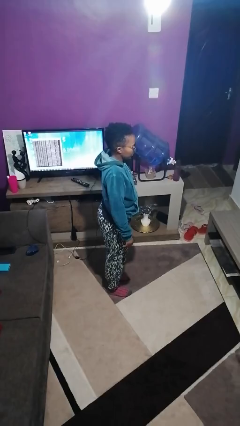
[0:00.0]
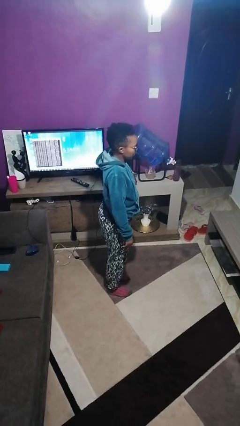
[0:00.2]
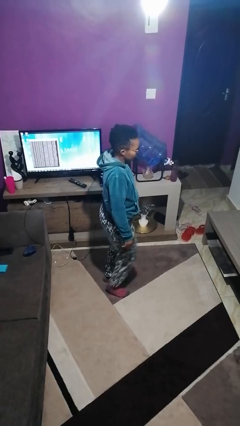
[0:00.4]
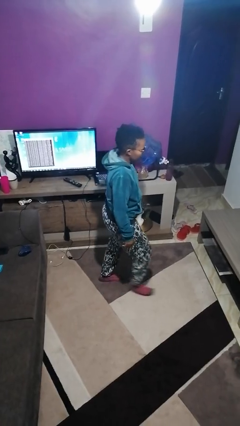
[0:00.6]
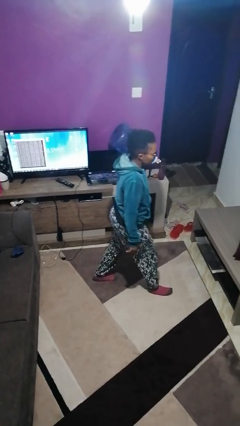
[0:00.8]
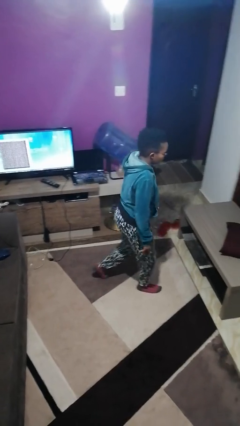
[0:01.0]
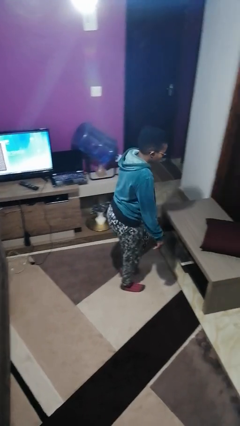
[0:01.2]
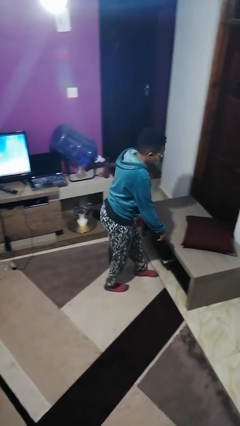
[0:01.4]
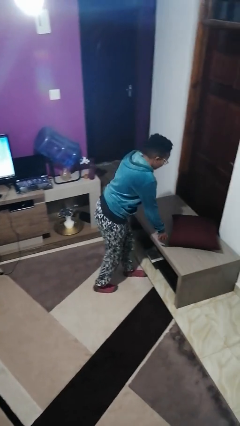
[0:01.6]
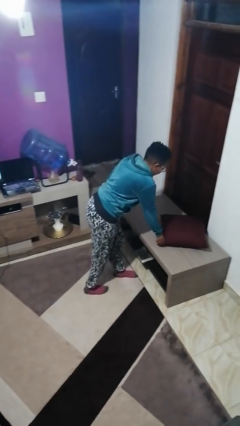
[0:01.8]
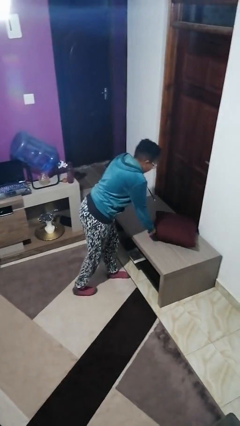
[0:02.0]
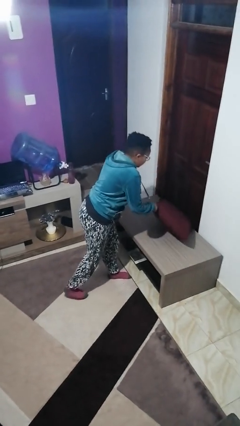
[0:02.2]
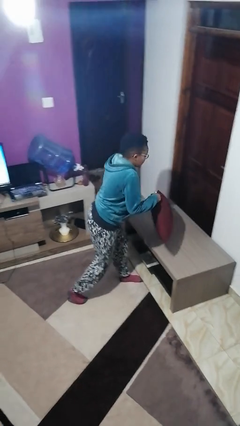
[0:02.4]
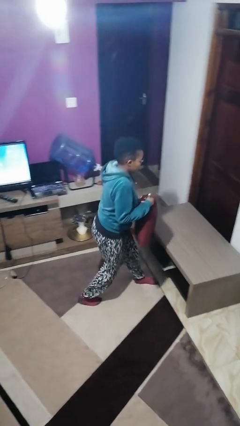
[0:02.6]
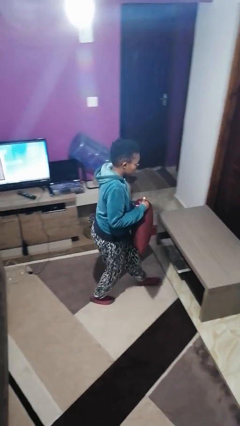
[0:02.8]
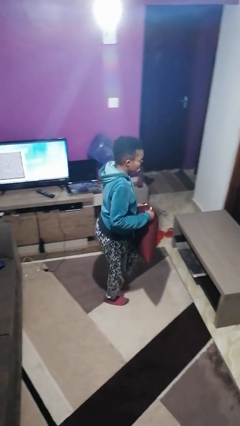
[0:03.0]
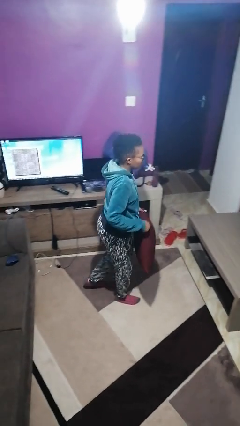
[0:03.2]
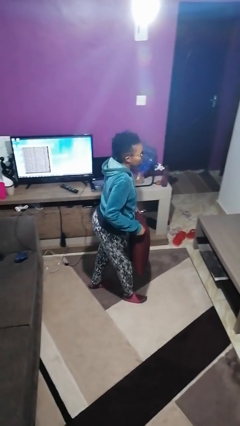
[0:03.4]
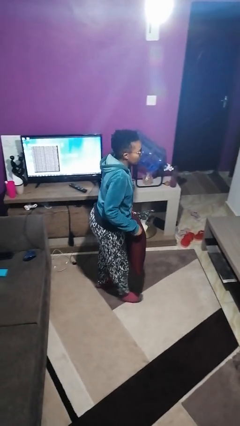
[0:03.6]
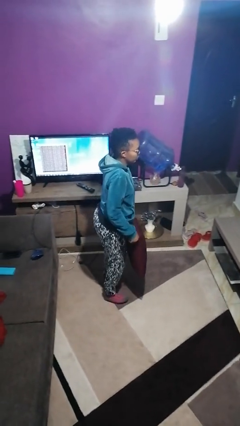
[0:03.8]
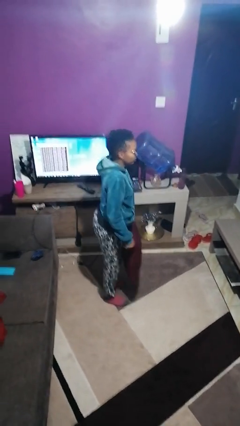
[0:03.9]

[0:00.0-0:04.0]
person picks up object from table

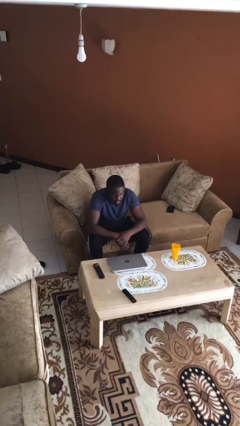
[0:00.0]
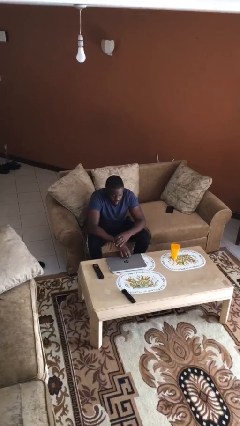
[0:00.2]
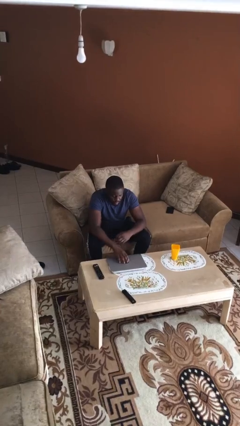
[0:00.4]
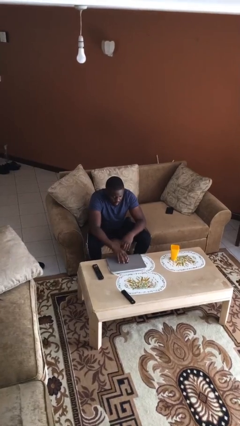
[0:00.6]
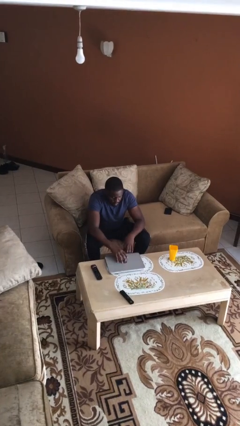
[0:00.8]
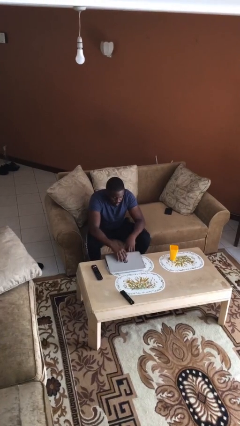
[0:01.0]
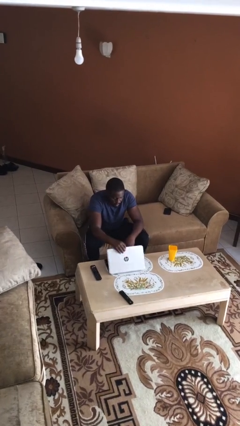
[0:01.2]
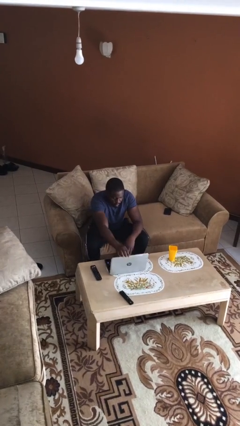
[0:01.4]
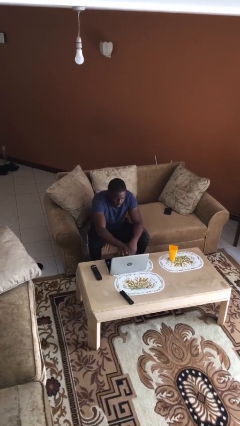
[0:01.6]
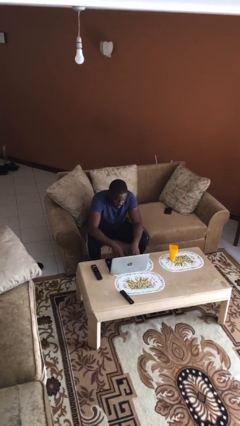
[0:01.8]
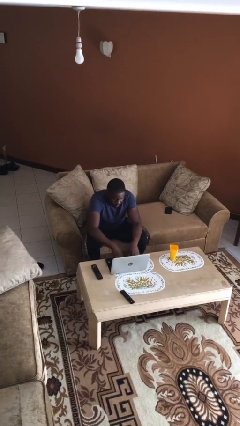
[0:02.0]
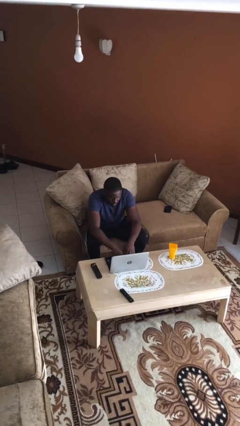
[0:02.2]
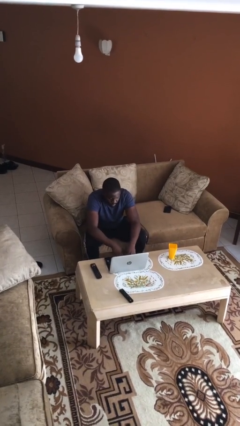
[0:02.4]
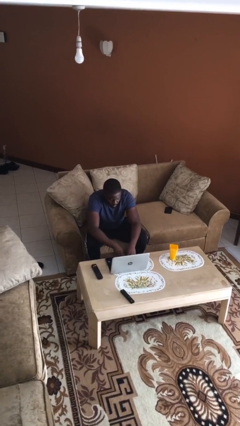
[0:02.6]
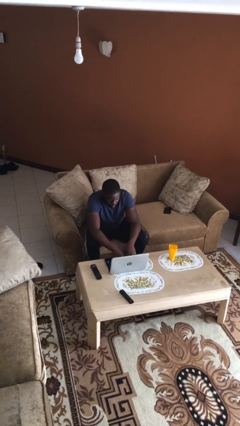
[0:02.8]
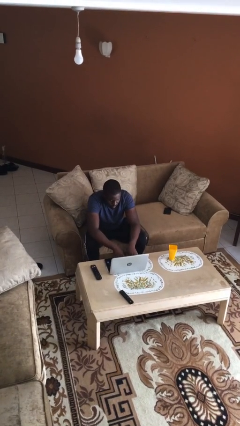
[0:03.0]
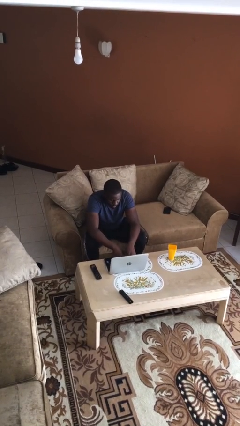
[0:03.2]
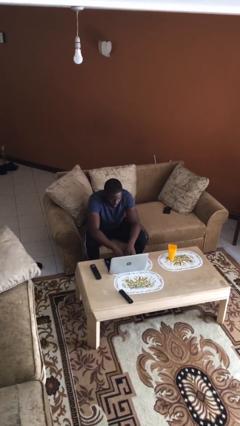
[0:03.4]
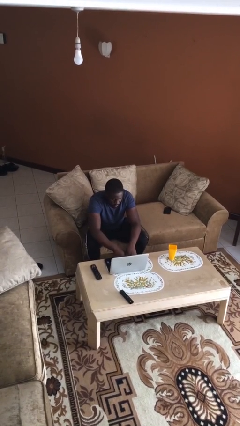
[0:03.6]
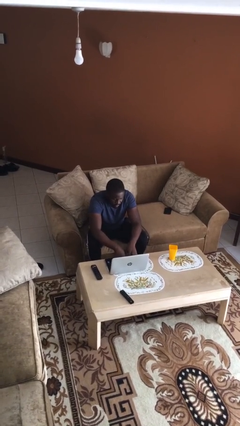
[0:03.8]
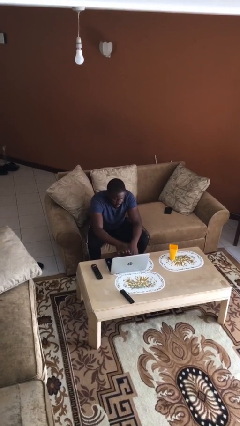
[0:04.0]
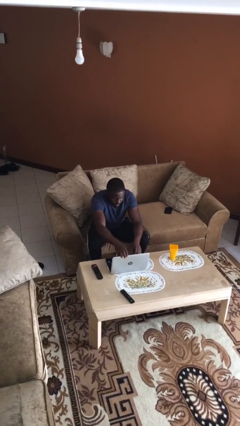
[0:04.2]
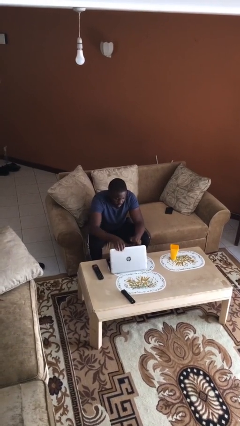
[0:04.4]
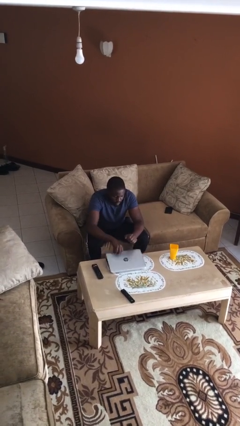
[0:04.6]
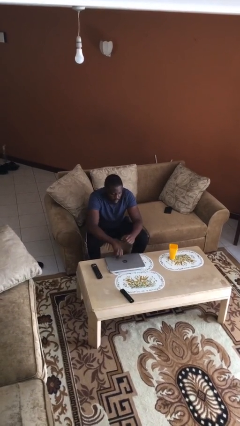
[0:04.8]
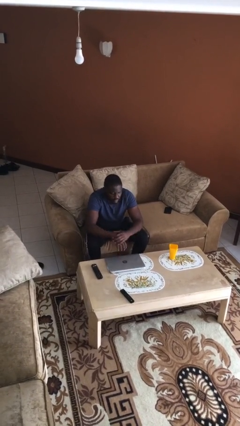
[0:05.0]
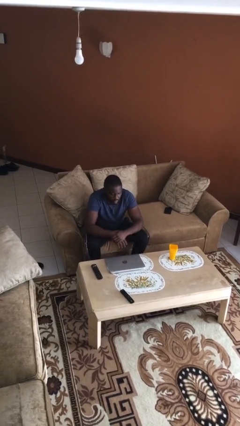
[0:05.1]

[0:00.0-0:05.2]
person interacts with laptop

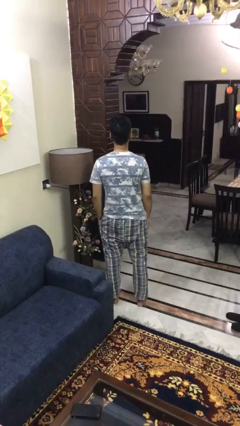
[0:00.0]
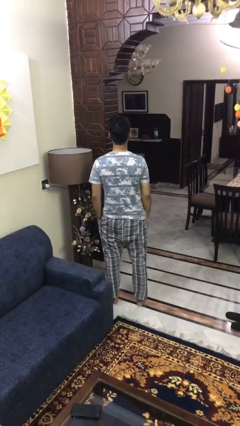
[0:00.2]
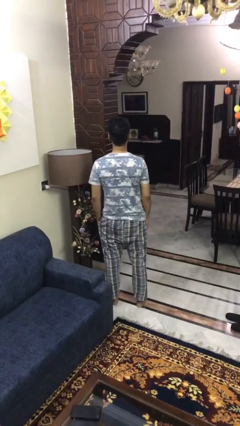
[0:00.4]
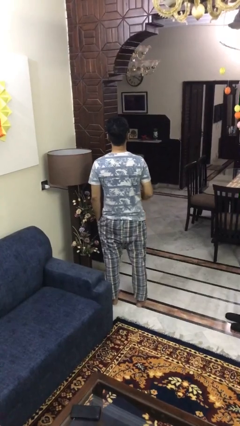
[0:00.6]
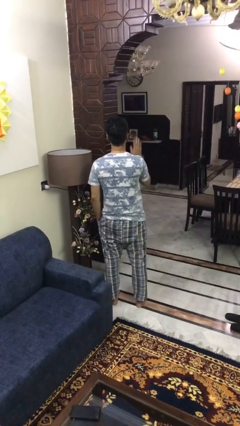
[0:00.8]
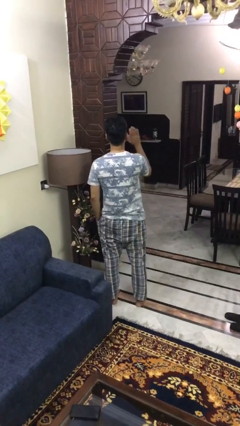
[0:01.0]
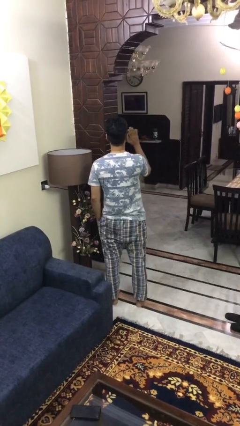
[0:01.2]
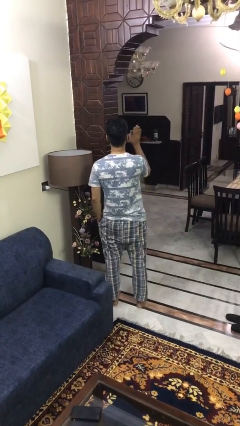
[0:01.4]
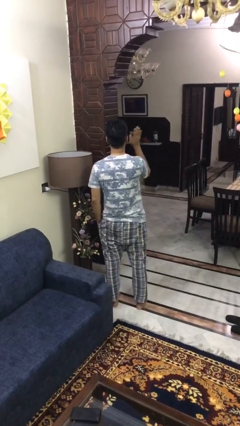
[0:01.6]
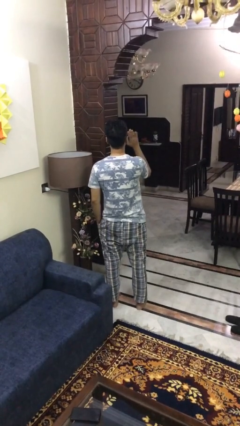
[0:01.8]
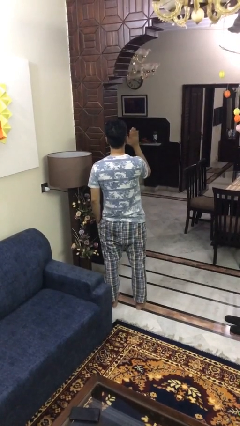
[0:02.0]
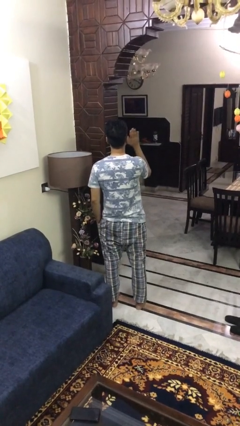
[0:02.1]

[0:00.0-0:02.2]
person waves at person

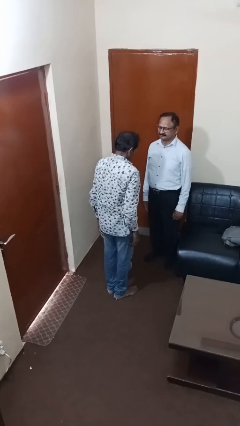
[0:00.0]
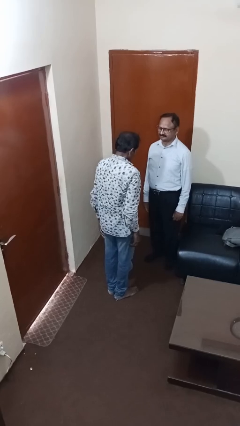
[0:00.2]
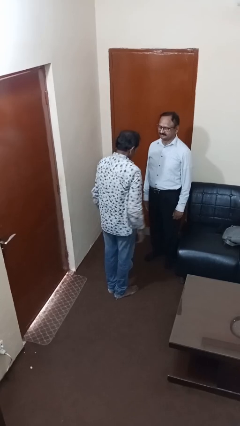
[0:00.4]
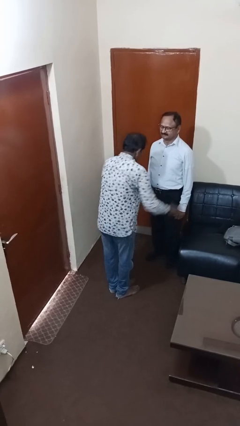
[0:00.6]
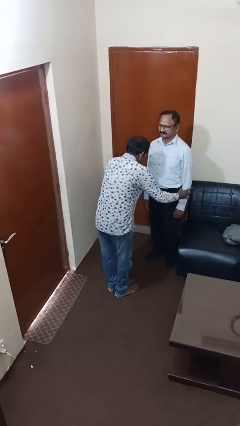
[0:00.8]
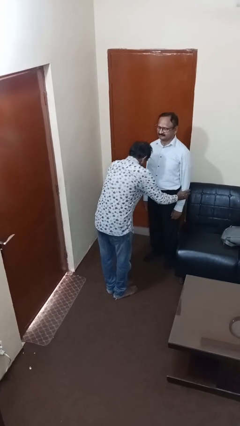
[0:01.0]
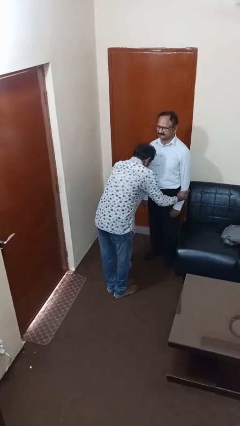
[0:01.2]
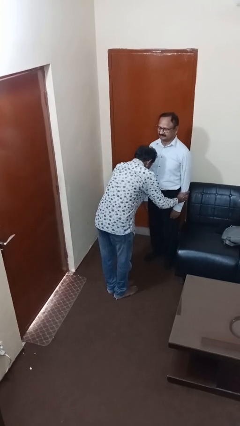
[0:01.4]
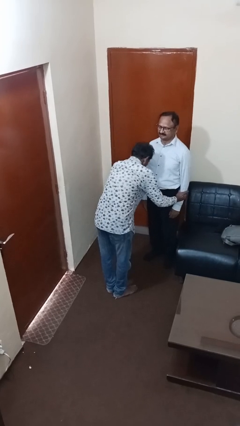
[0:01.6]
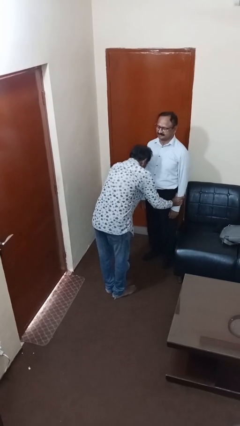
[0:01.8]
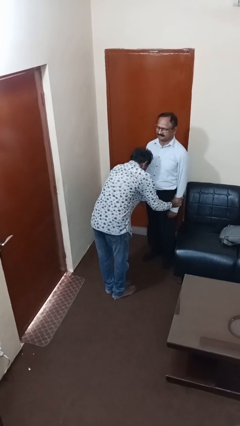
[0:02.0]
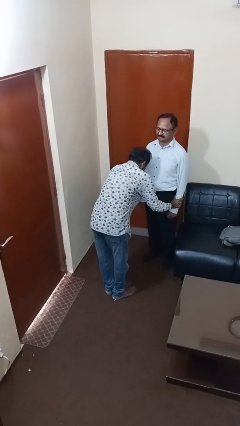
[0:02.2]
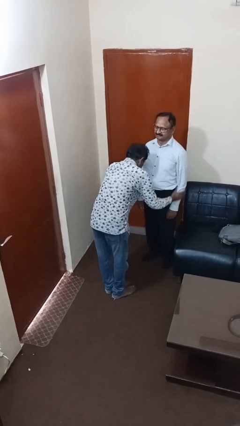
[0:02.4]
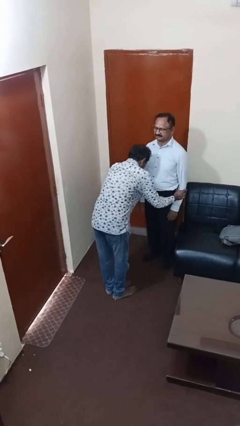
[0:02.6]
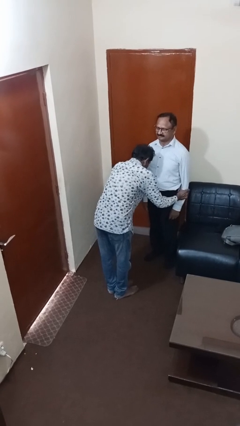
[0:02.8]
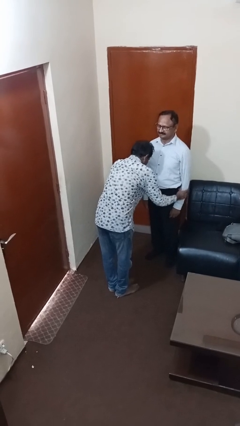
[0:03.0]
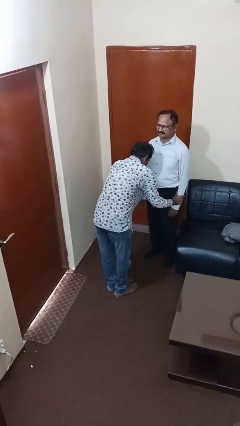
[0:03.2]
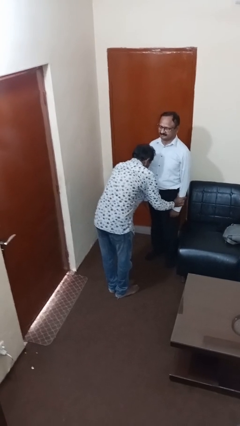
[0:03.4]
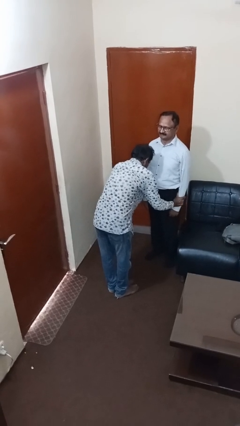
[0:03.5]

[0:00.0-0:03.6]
person grabs person by forearm

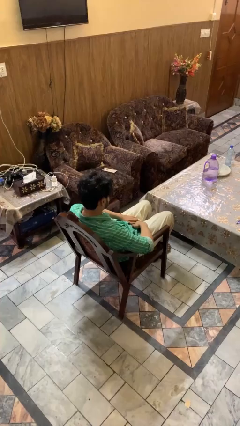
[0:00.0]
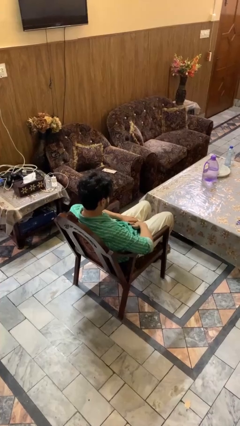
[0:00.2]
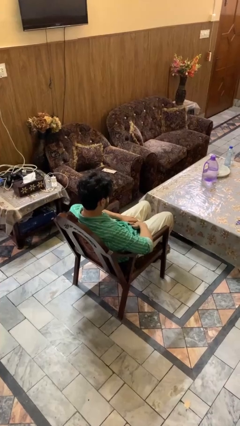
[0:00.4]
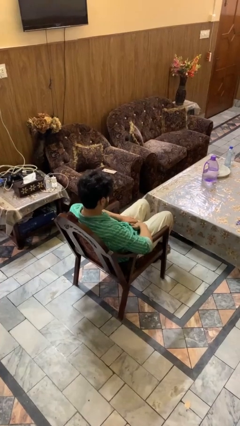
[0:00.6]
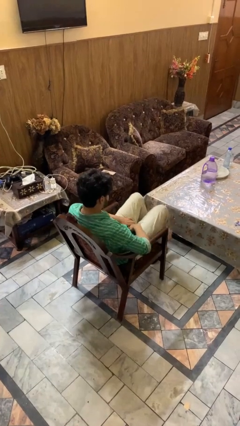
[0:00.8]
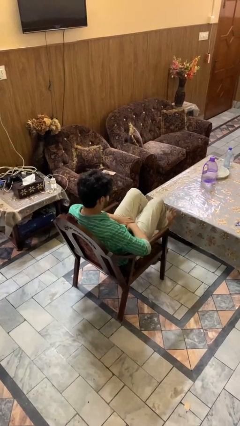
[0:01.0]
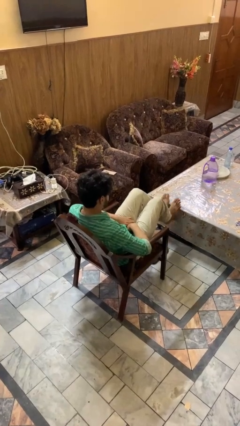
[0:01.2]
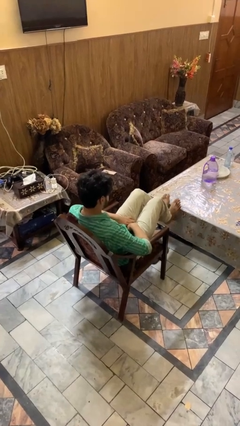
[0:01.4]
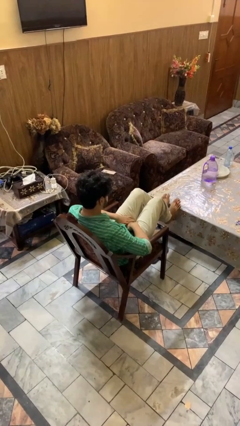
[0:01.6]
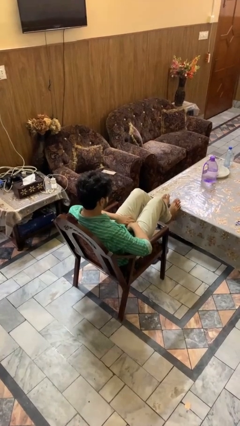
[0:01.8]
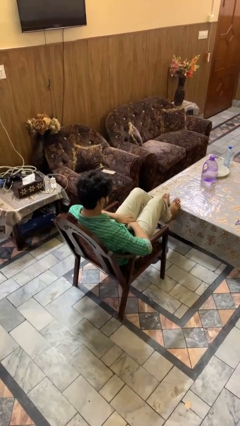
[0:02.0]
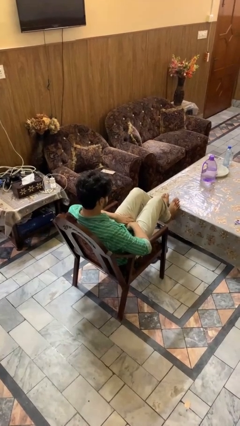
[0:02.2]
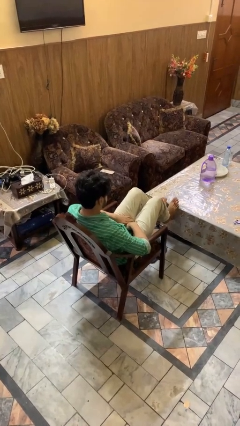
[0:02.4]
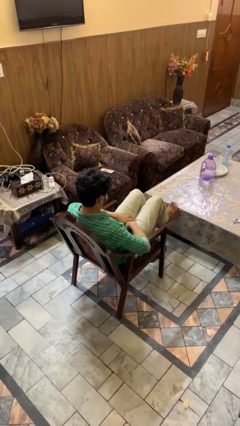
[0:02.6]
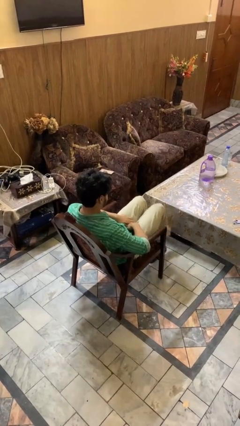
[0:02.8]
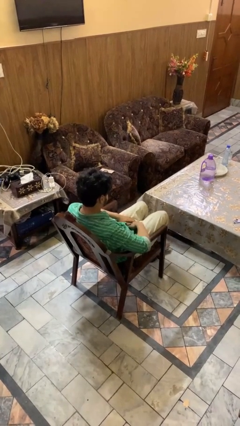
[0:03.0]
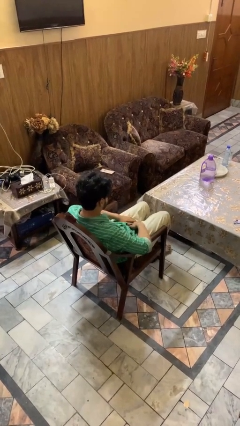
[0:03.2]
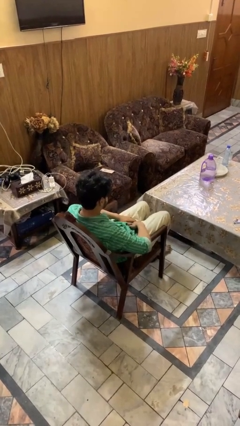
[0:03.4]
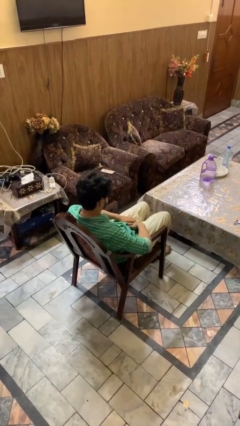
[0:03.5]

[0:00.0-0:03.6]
person puts feet up
